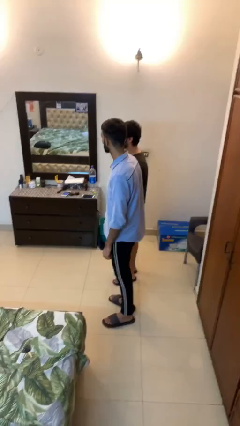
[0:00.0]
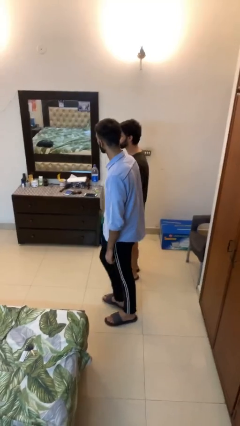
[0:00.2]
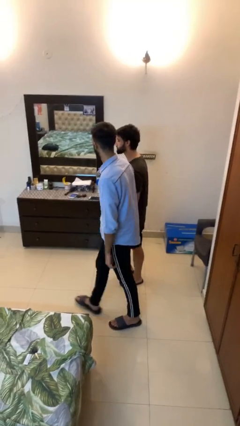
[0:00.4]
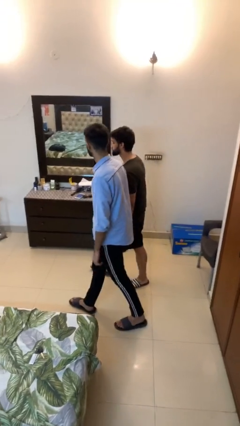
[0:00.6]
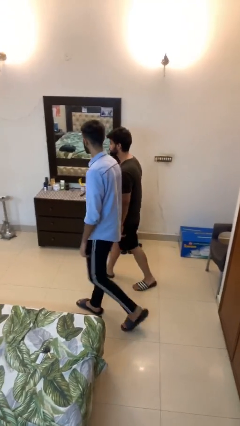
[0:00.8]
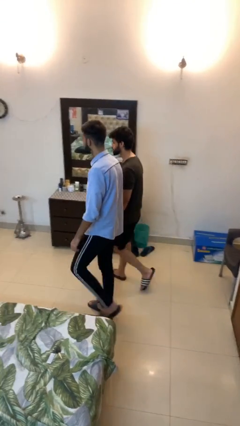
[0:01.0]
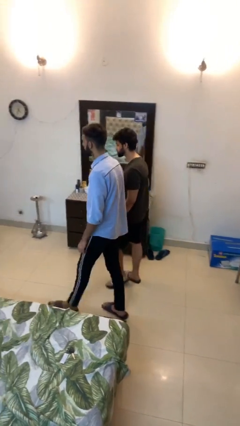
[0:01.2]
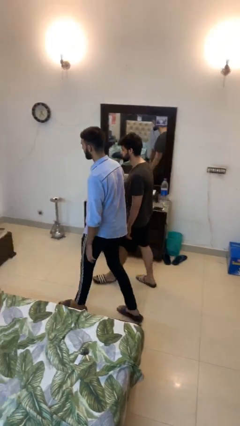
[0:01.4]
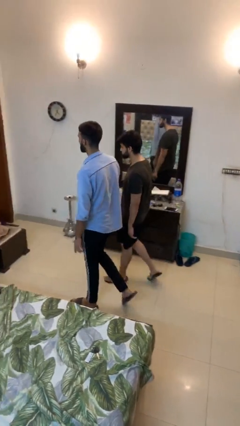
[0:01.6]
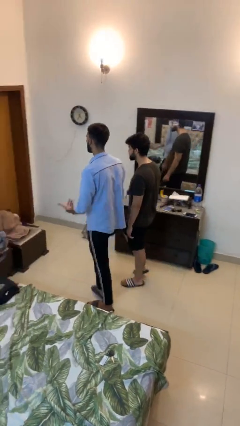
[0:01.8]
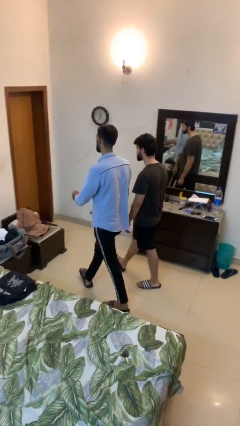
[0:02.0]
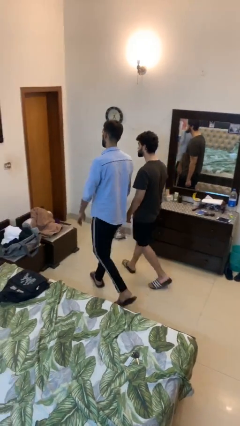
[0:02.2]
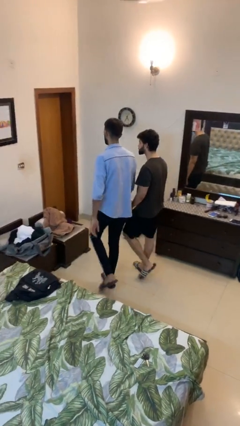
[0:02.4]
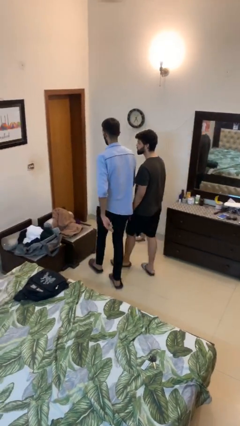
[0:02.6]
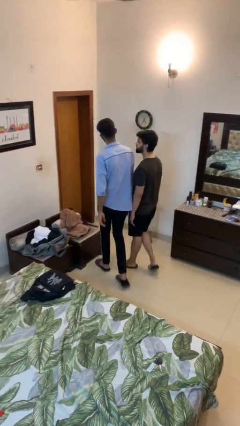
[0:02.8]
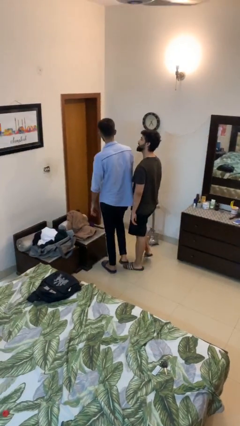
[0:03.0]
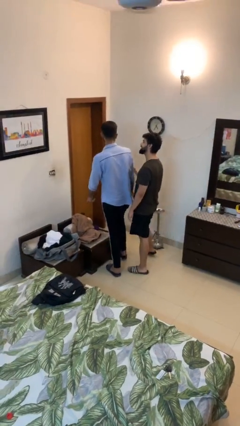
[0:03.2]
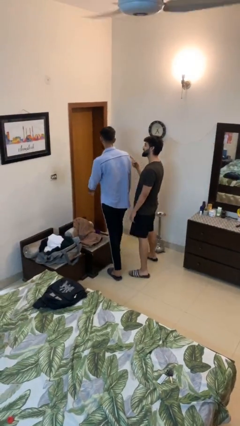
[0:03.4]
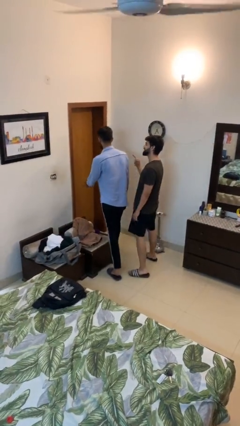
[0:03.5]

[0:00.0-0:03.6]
person talks to person

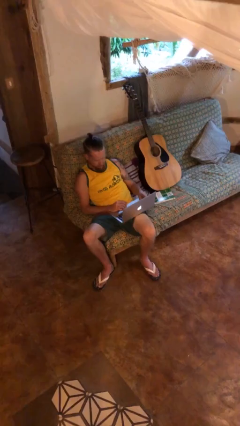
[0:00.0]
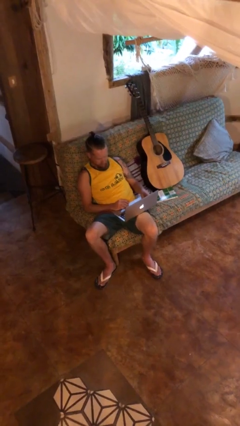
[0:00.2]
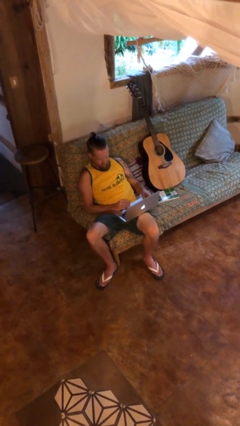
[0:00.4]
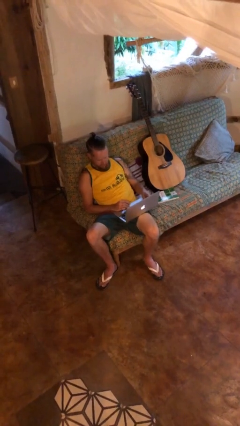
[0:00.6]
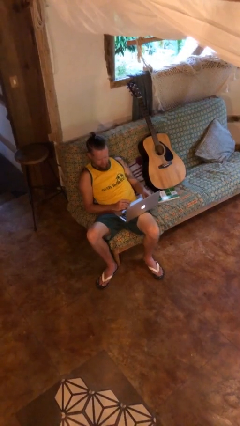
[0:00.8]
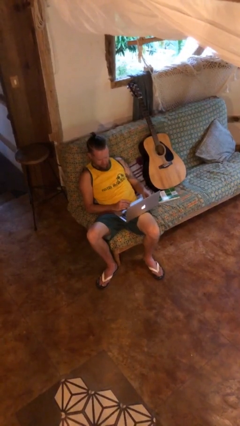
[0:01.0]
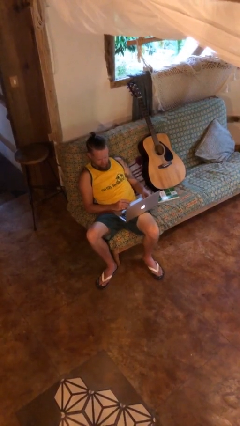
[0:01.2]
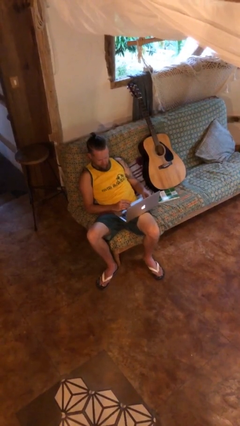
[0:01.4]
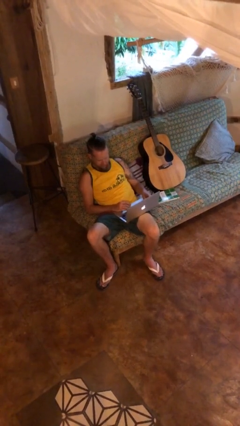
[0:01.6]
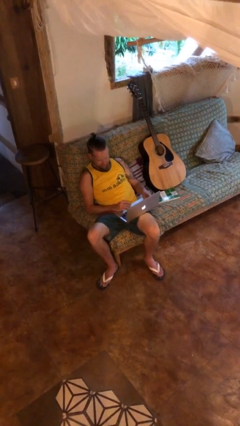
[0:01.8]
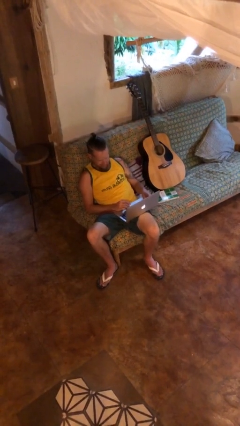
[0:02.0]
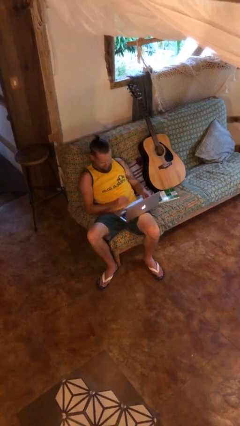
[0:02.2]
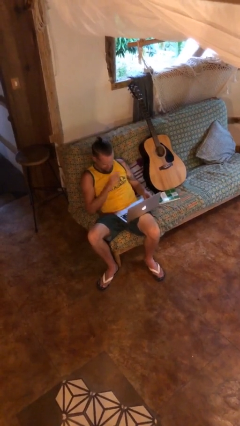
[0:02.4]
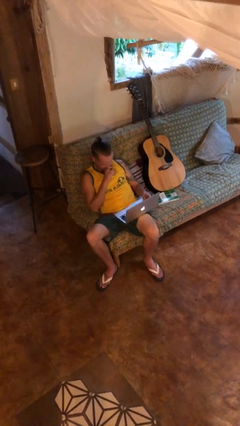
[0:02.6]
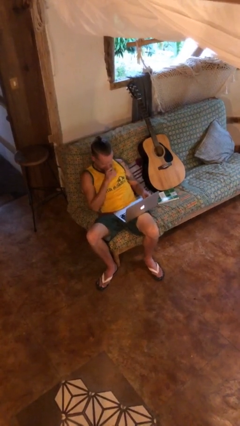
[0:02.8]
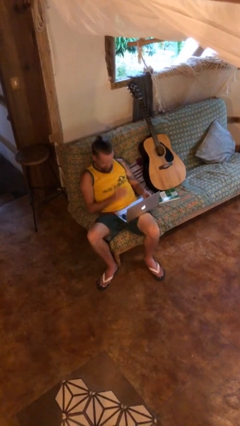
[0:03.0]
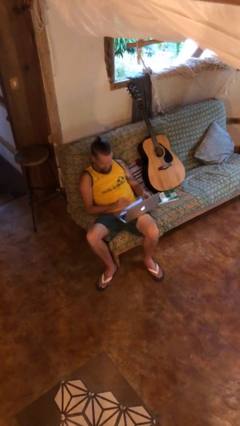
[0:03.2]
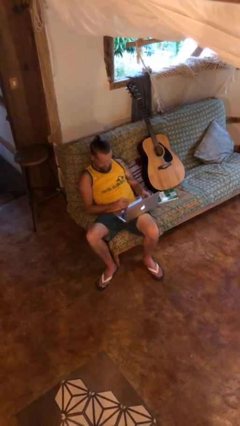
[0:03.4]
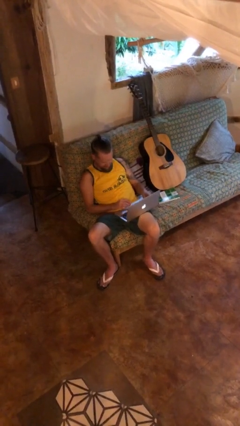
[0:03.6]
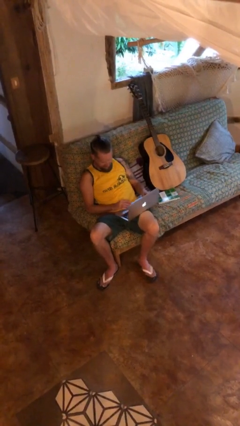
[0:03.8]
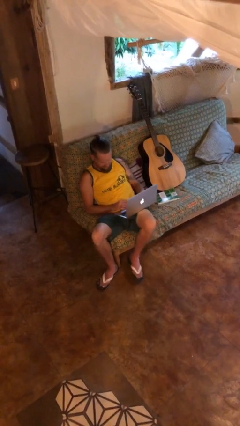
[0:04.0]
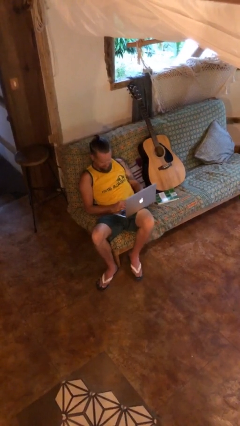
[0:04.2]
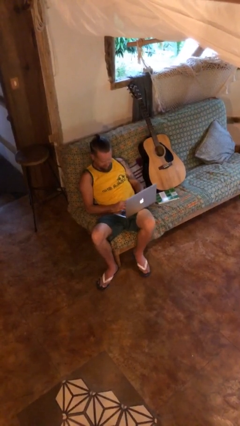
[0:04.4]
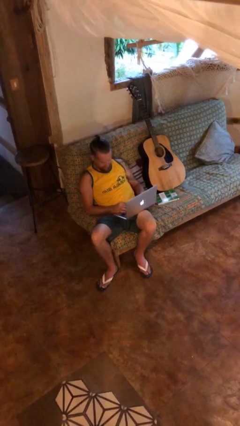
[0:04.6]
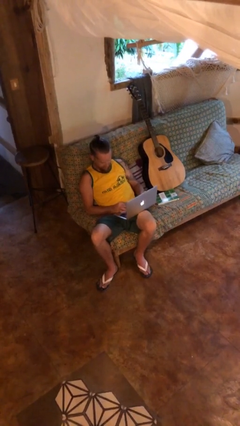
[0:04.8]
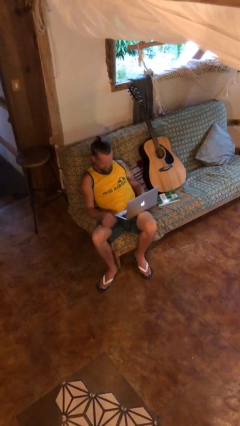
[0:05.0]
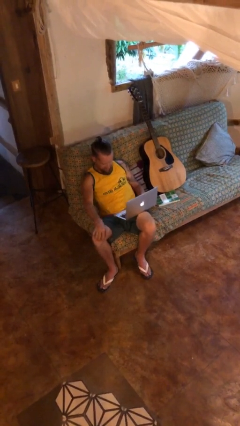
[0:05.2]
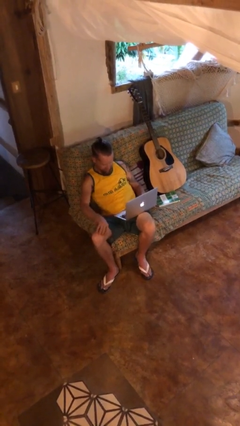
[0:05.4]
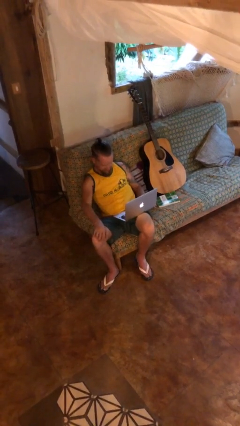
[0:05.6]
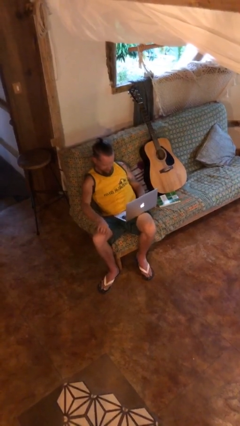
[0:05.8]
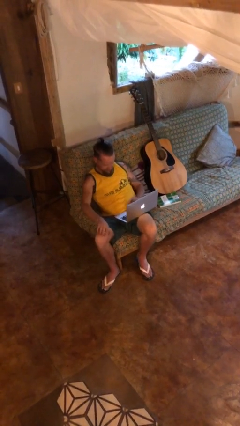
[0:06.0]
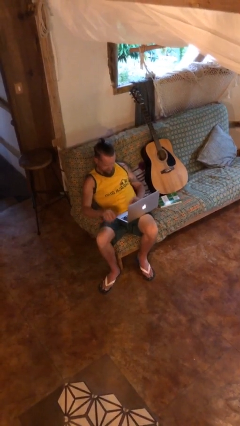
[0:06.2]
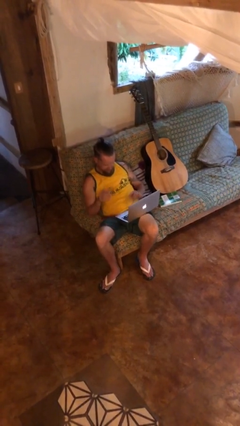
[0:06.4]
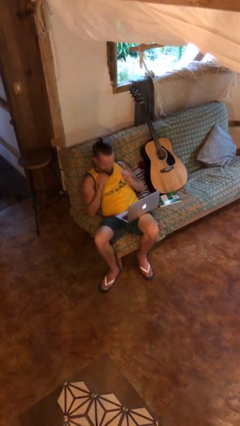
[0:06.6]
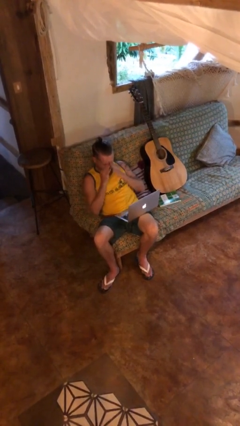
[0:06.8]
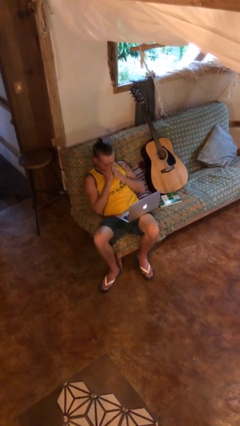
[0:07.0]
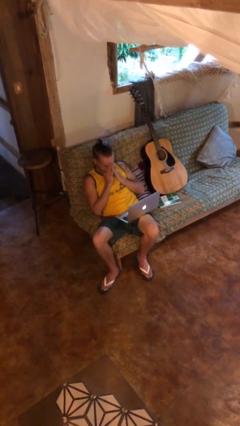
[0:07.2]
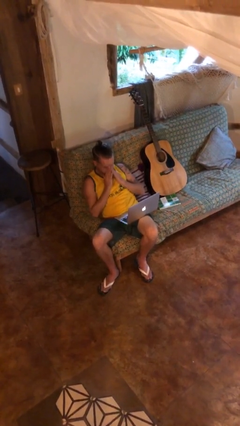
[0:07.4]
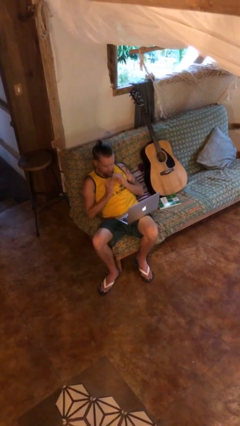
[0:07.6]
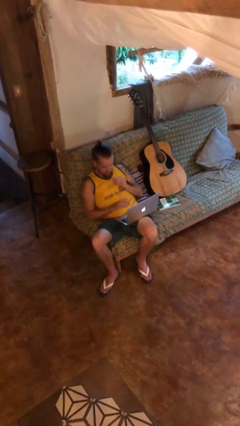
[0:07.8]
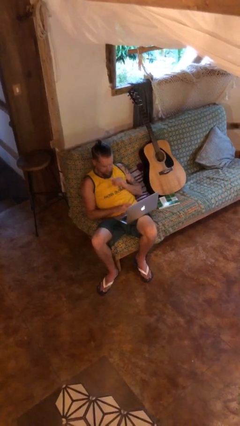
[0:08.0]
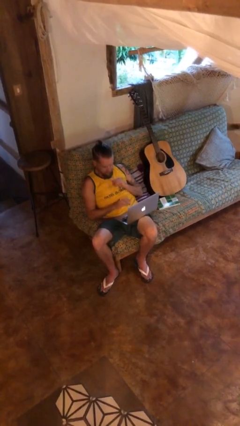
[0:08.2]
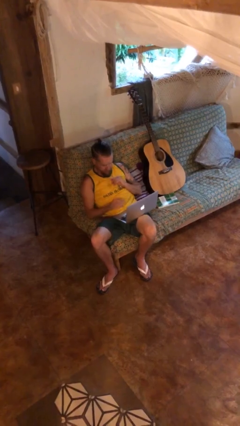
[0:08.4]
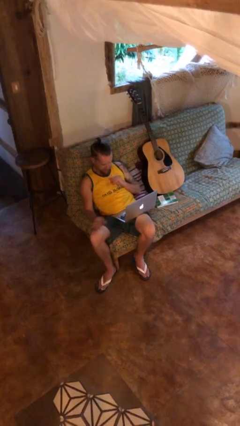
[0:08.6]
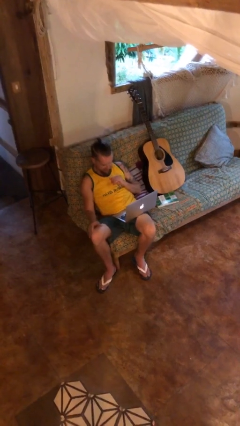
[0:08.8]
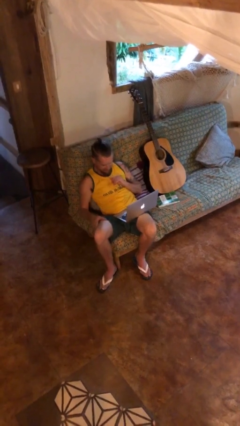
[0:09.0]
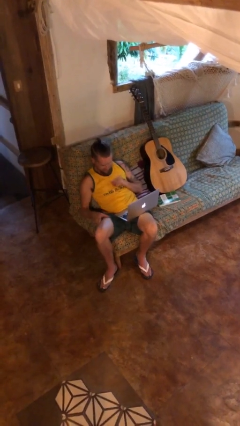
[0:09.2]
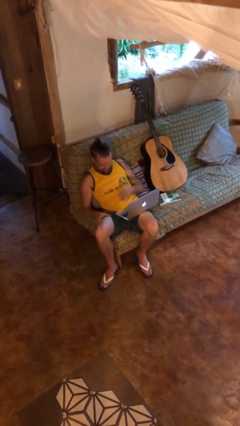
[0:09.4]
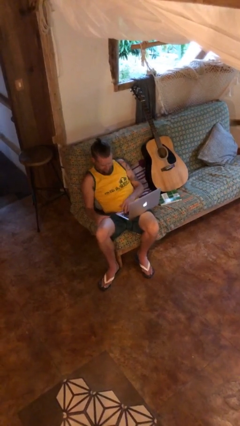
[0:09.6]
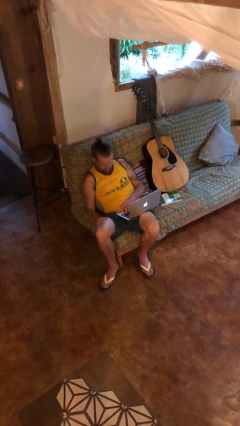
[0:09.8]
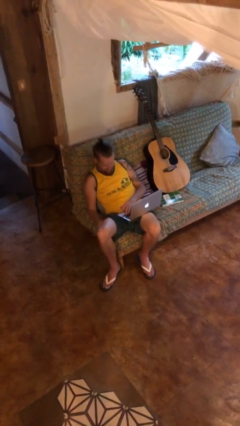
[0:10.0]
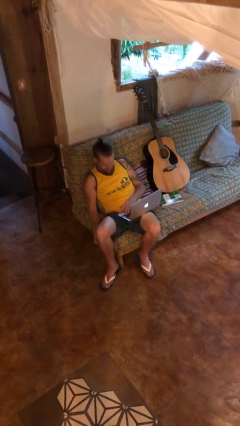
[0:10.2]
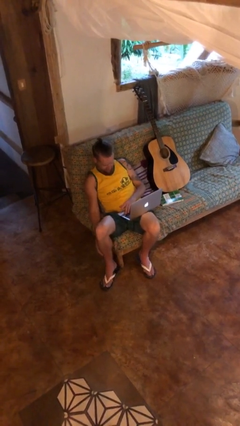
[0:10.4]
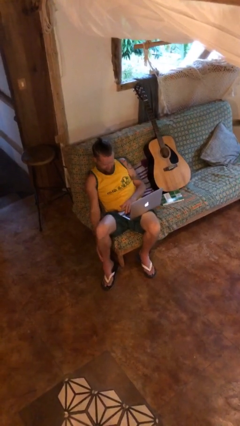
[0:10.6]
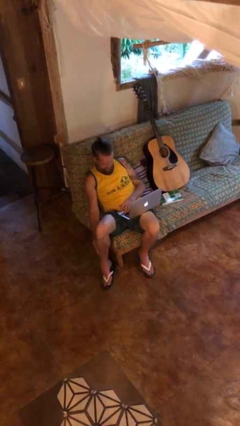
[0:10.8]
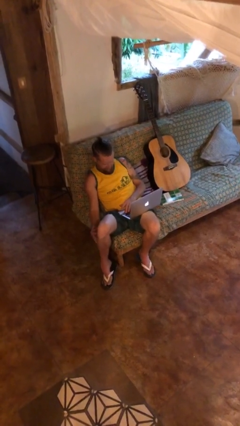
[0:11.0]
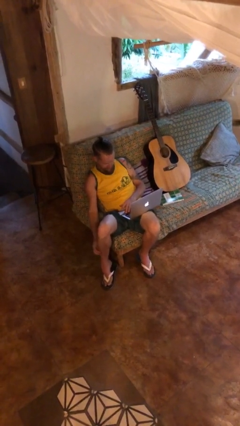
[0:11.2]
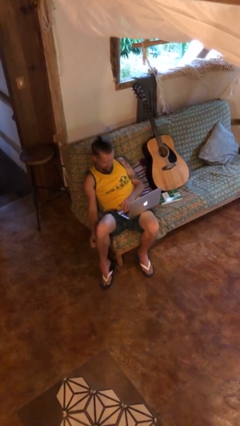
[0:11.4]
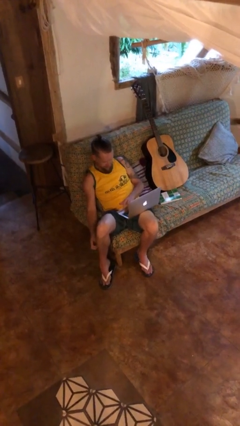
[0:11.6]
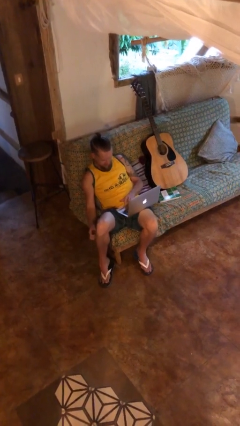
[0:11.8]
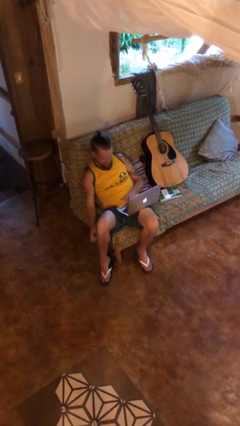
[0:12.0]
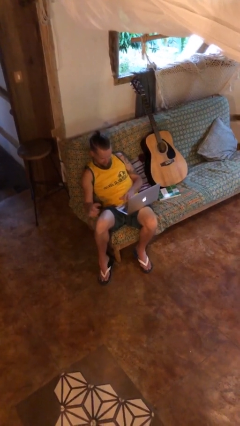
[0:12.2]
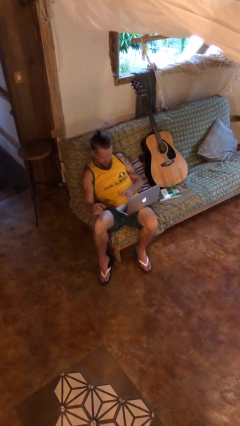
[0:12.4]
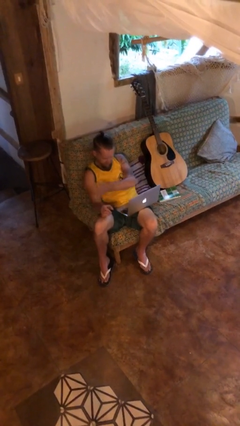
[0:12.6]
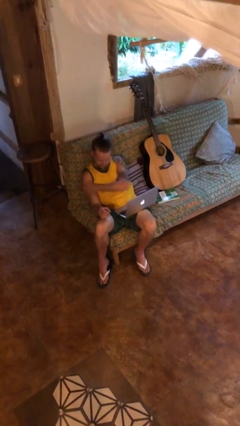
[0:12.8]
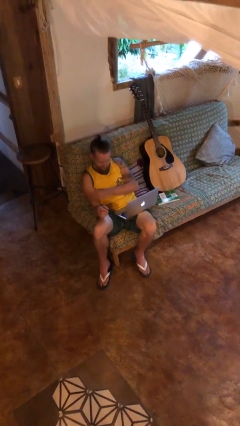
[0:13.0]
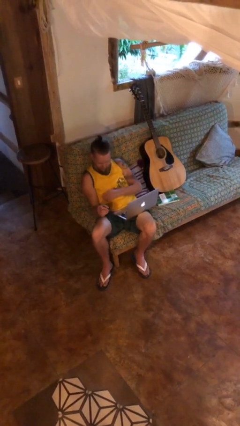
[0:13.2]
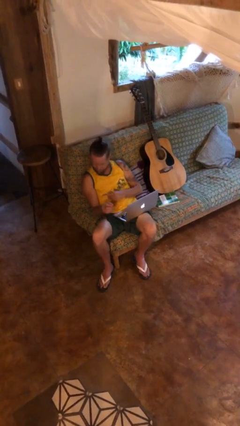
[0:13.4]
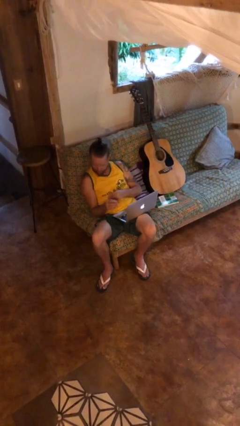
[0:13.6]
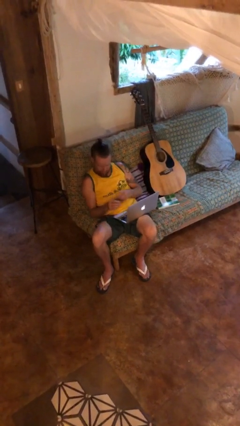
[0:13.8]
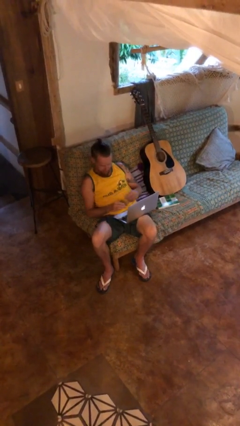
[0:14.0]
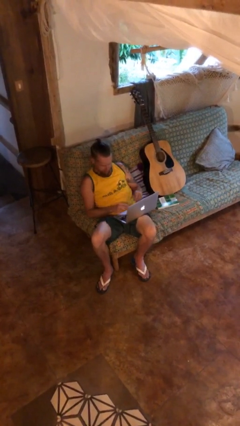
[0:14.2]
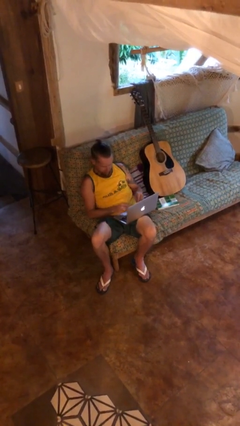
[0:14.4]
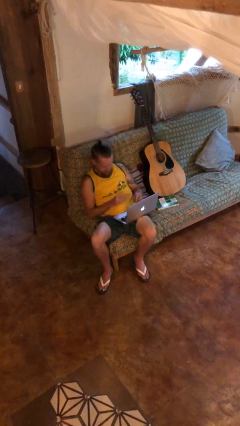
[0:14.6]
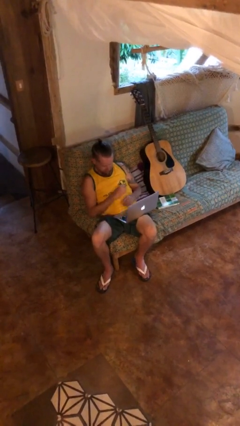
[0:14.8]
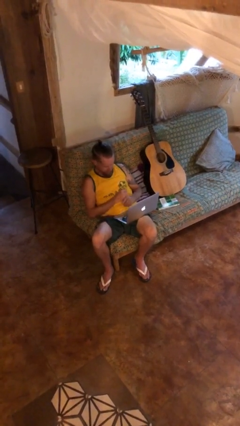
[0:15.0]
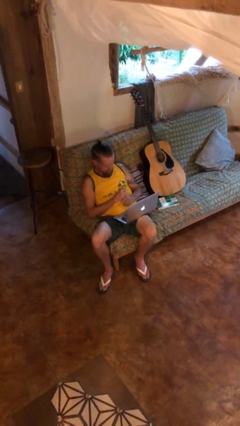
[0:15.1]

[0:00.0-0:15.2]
person interacts with laptop
